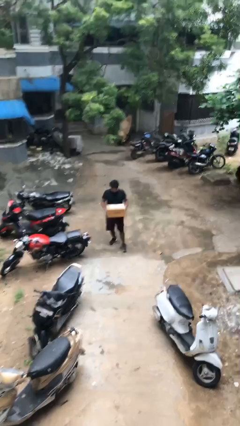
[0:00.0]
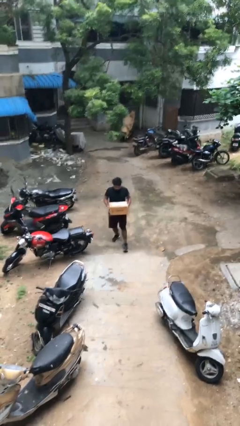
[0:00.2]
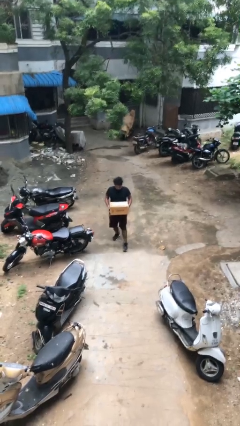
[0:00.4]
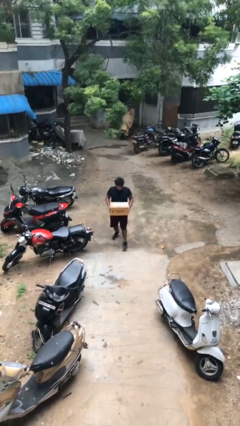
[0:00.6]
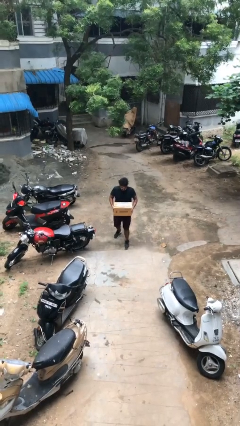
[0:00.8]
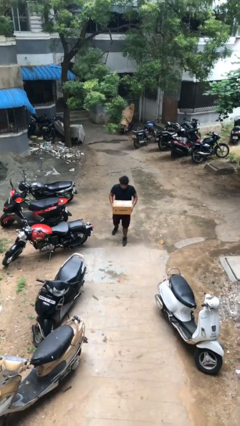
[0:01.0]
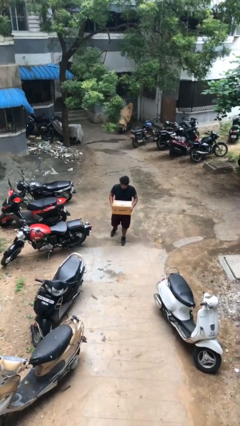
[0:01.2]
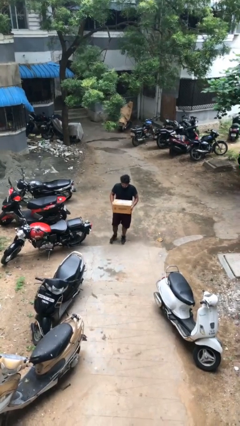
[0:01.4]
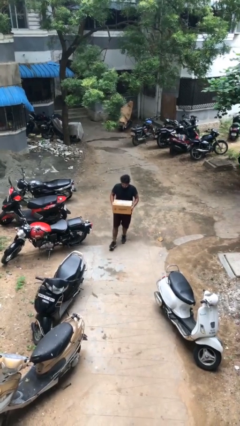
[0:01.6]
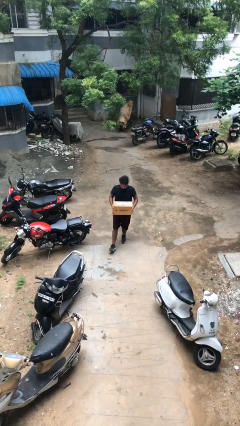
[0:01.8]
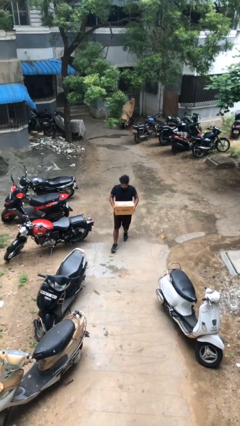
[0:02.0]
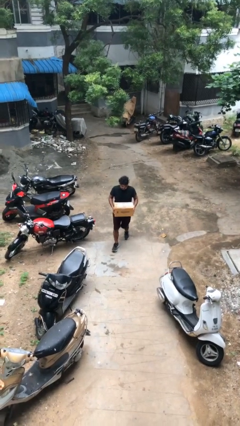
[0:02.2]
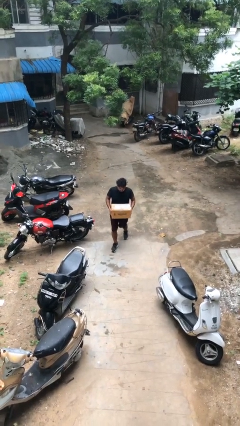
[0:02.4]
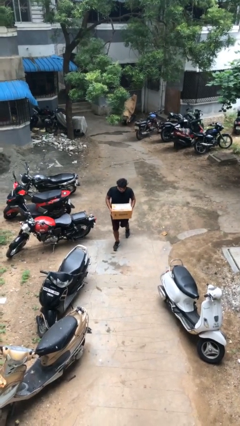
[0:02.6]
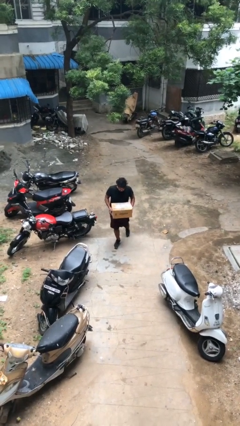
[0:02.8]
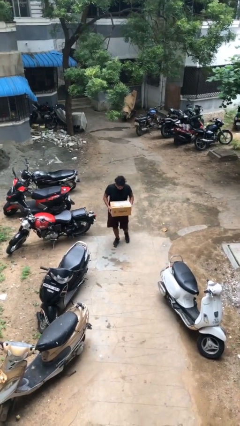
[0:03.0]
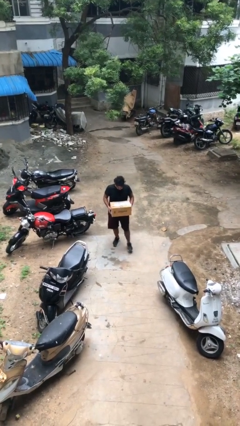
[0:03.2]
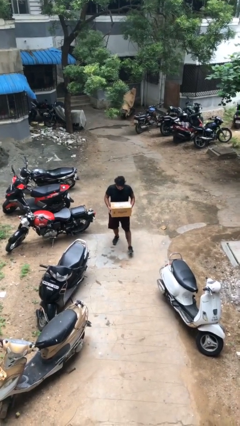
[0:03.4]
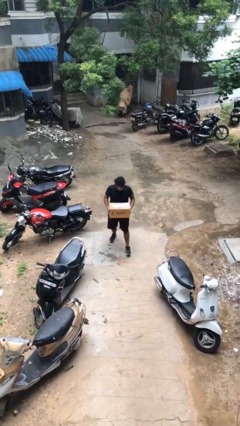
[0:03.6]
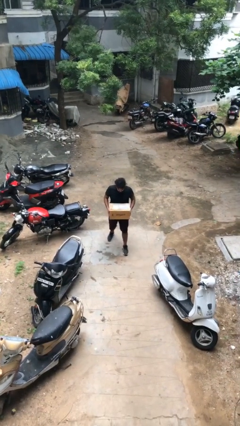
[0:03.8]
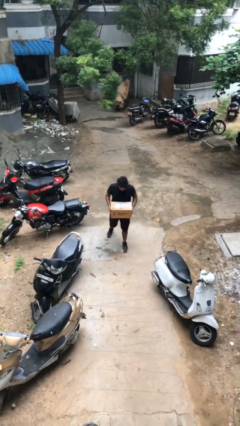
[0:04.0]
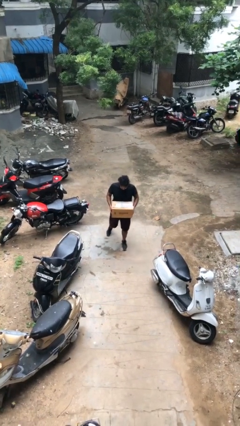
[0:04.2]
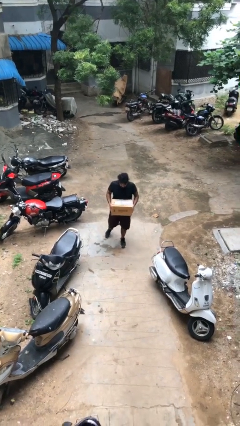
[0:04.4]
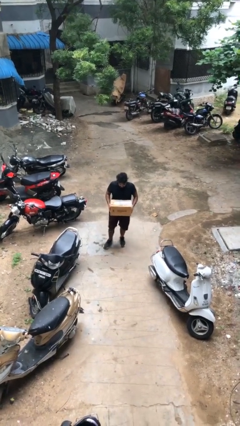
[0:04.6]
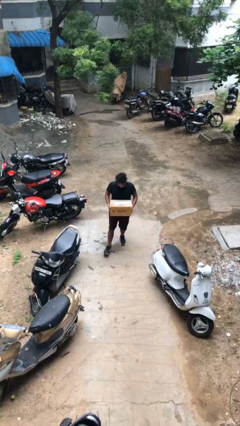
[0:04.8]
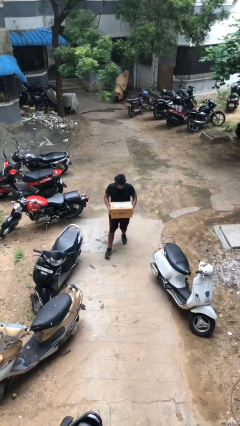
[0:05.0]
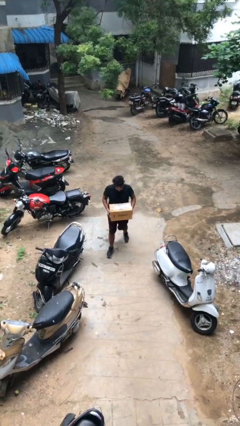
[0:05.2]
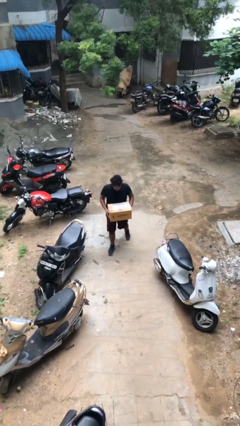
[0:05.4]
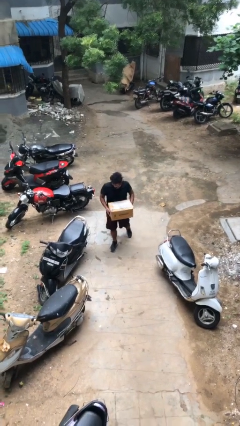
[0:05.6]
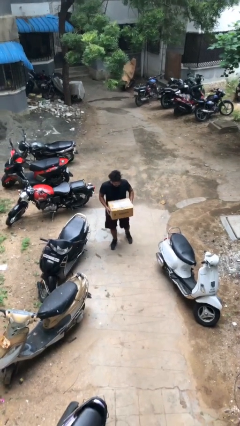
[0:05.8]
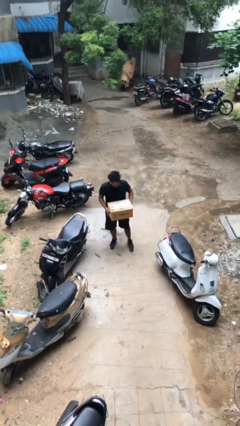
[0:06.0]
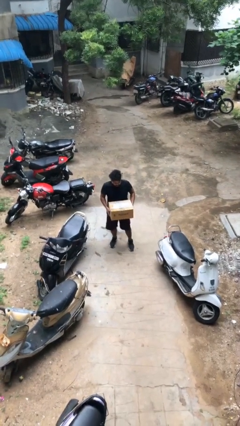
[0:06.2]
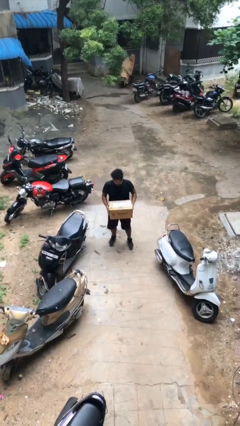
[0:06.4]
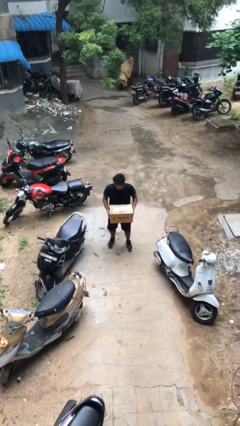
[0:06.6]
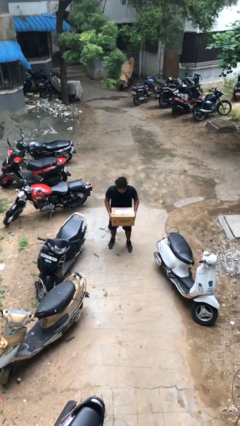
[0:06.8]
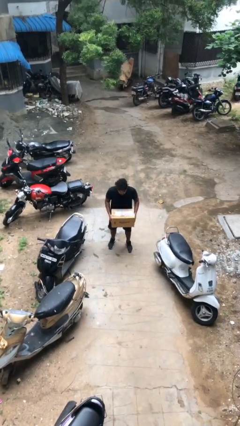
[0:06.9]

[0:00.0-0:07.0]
person carries heavy object

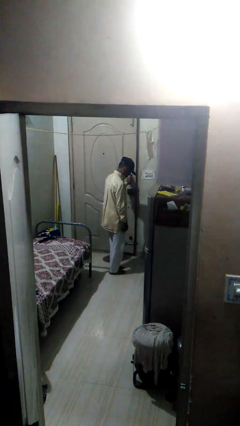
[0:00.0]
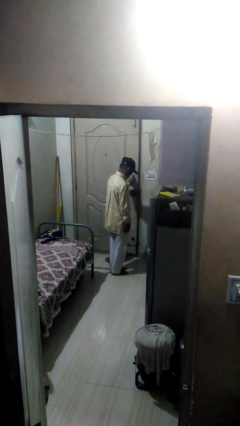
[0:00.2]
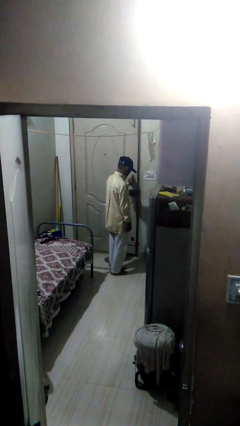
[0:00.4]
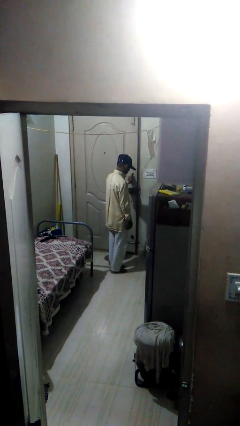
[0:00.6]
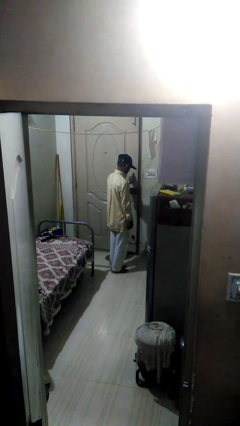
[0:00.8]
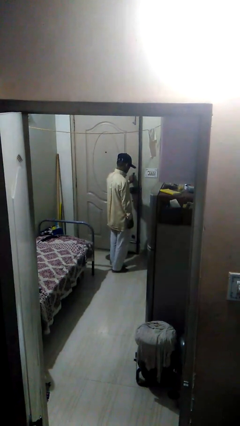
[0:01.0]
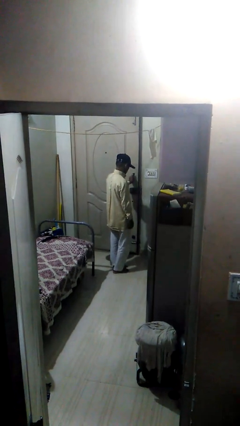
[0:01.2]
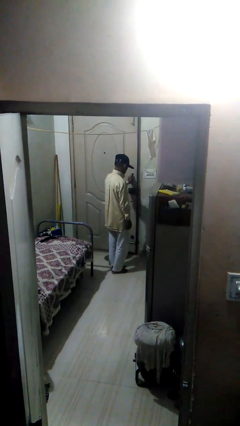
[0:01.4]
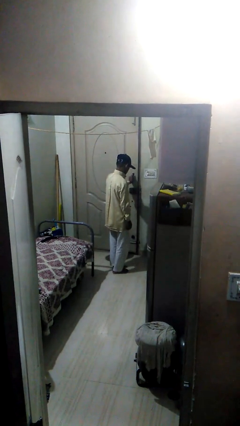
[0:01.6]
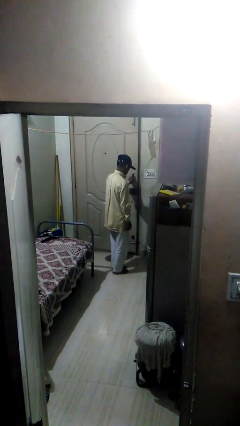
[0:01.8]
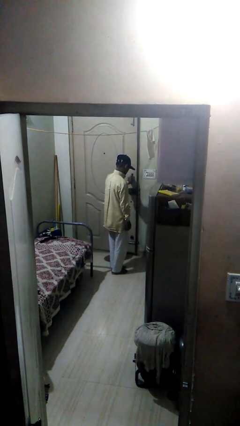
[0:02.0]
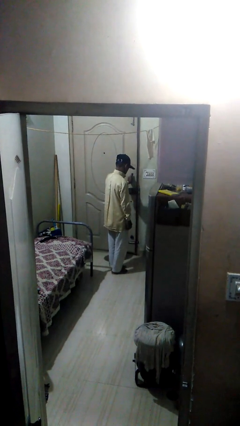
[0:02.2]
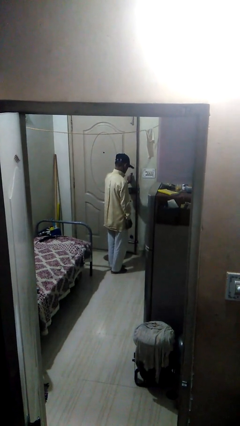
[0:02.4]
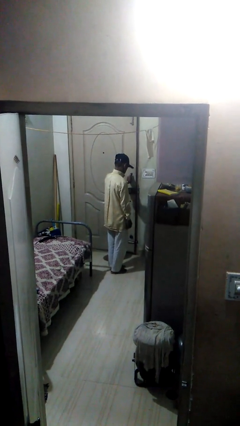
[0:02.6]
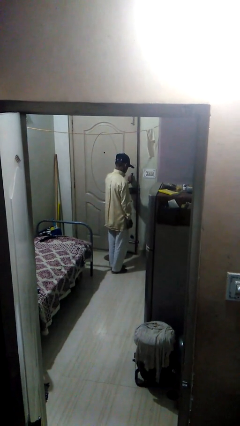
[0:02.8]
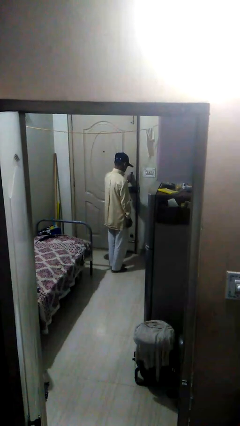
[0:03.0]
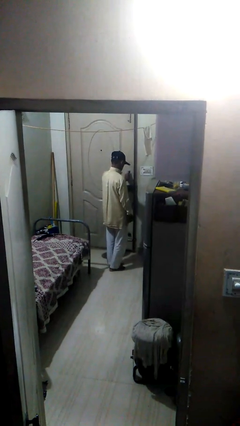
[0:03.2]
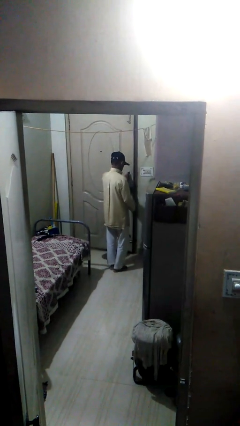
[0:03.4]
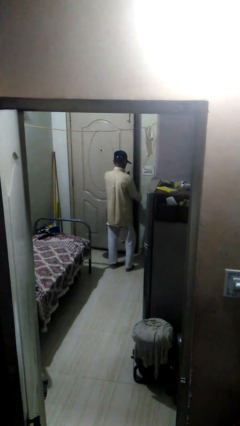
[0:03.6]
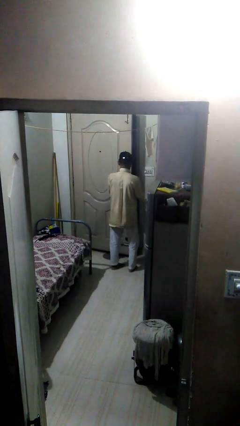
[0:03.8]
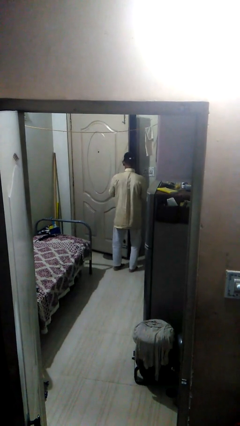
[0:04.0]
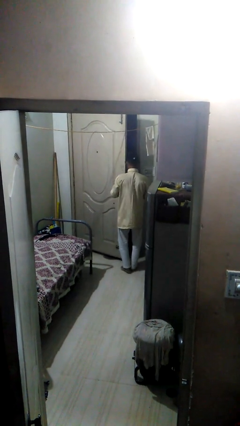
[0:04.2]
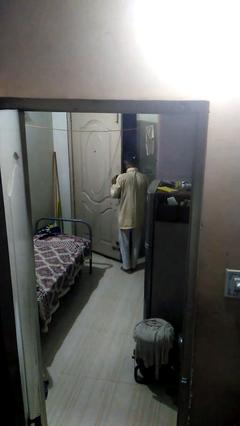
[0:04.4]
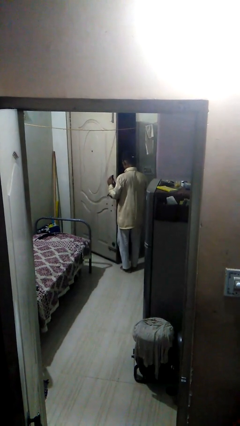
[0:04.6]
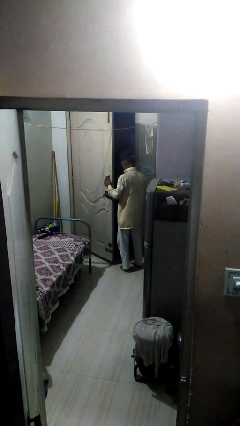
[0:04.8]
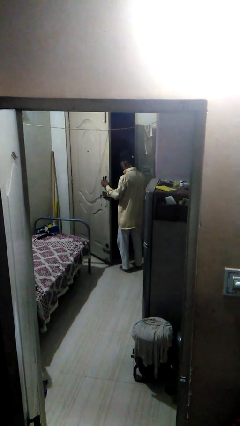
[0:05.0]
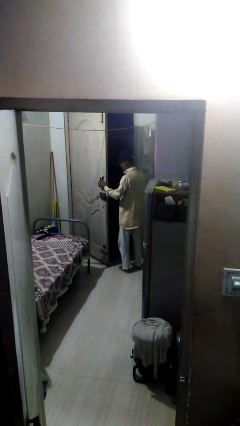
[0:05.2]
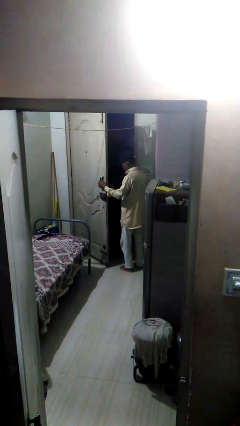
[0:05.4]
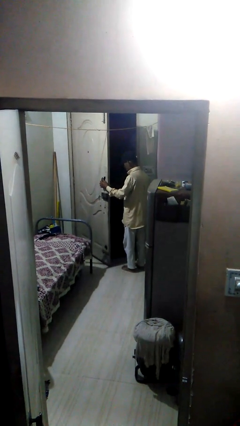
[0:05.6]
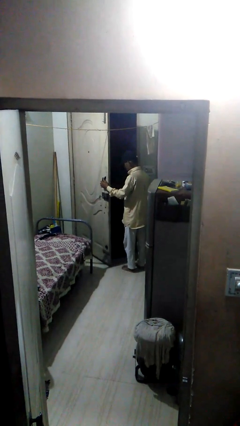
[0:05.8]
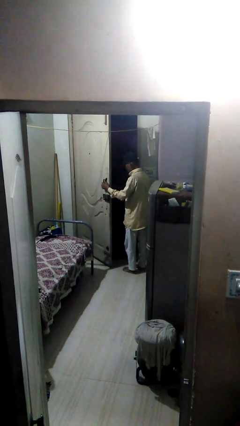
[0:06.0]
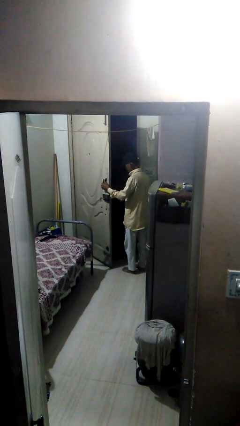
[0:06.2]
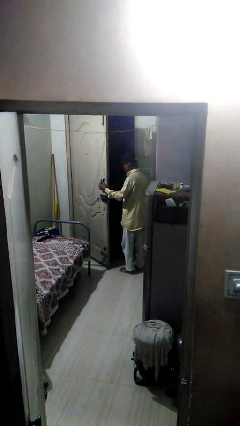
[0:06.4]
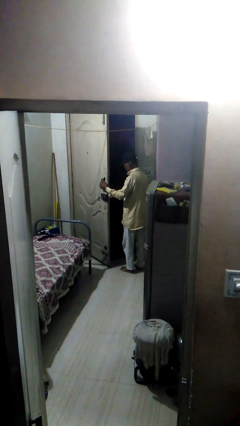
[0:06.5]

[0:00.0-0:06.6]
person opens facility door

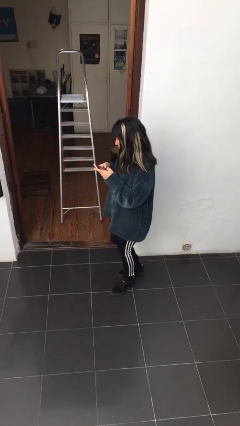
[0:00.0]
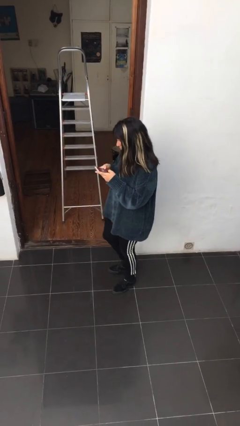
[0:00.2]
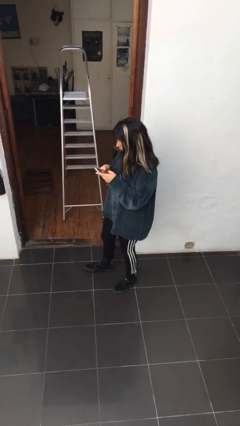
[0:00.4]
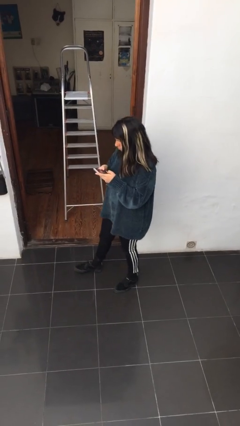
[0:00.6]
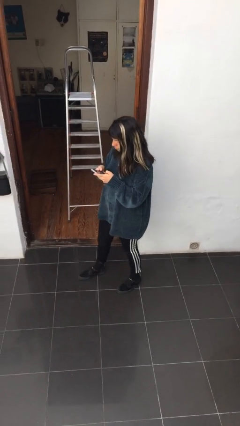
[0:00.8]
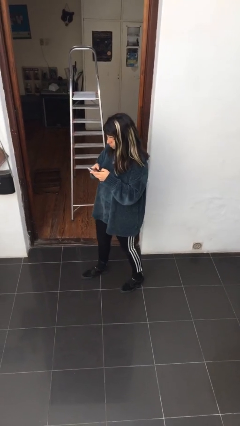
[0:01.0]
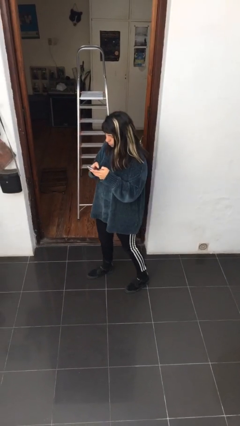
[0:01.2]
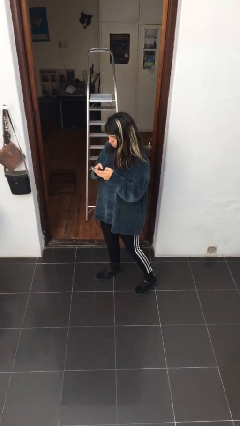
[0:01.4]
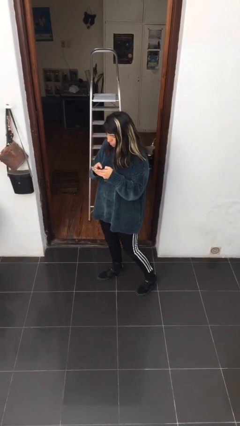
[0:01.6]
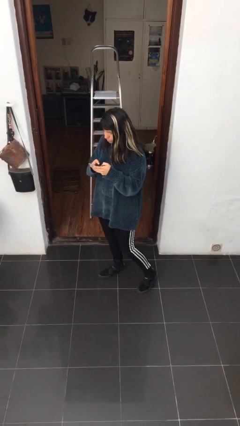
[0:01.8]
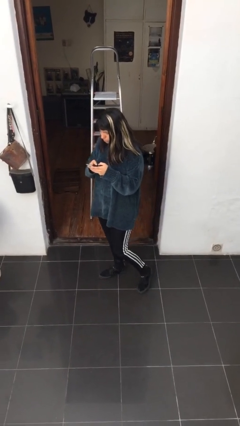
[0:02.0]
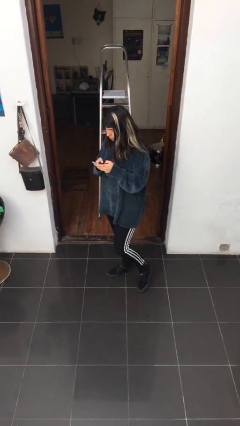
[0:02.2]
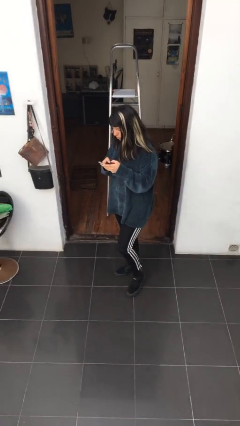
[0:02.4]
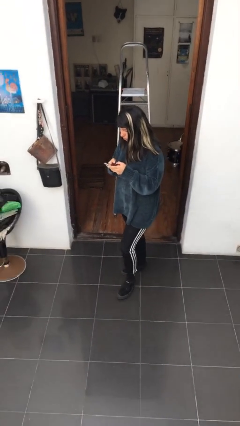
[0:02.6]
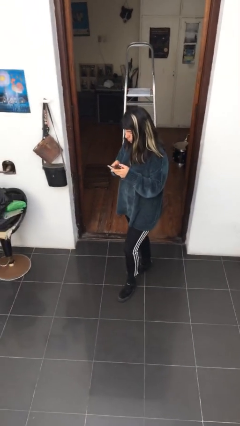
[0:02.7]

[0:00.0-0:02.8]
person texts on phone

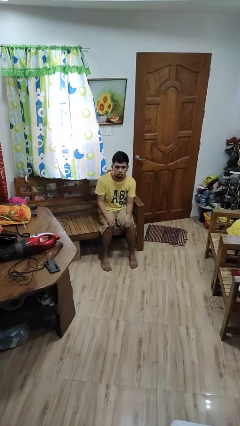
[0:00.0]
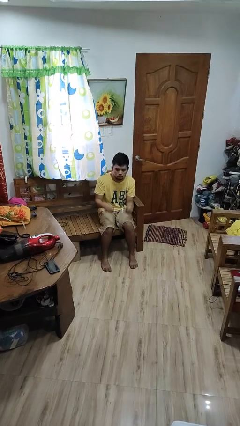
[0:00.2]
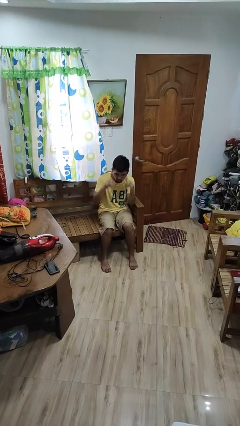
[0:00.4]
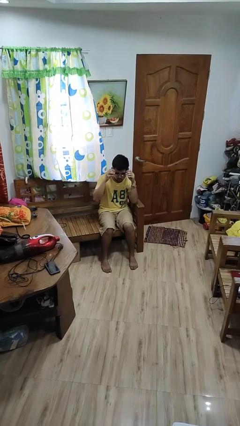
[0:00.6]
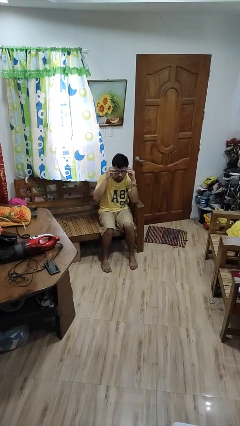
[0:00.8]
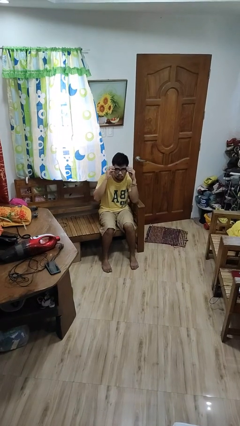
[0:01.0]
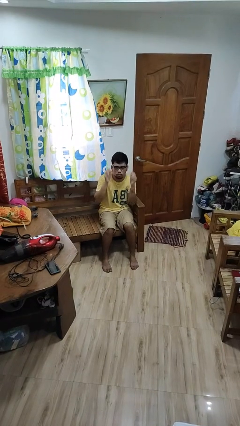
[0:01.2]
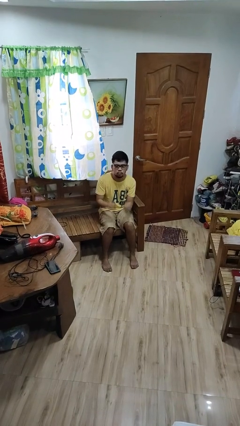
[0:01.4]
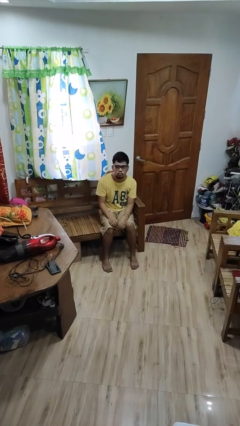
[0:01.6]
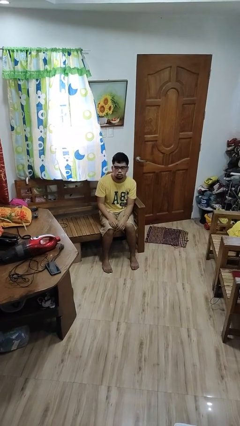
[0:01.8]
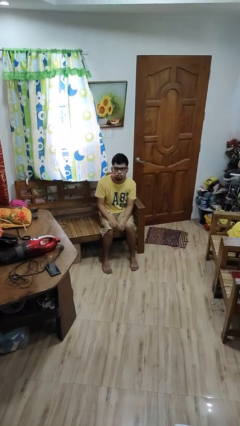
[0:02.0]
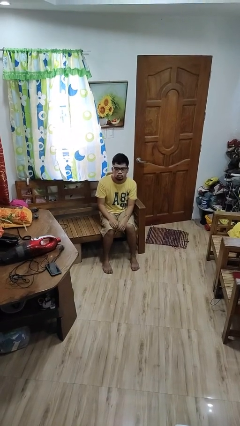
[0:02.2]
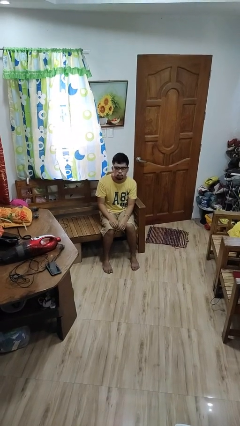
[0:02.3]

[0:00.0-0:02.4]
person puts on glasses
